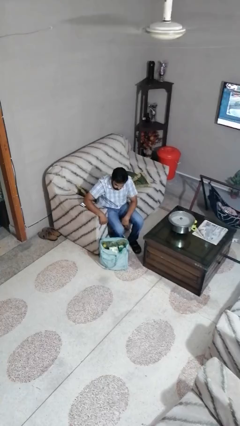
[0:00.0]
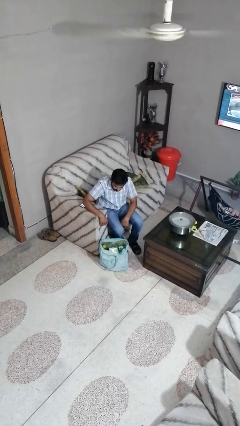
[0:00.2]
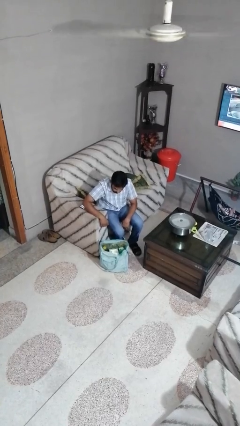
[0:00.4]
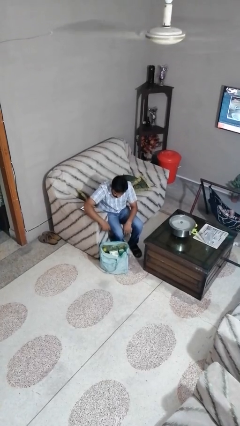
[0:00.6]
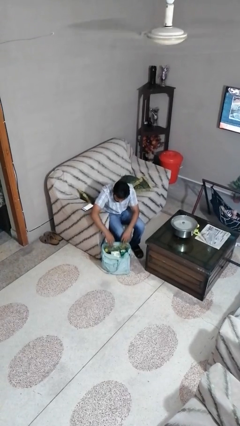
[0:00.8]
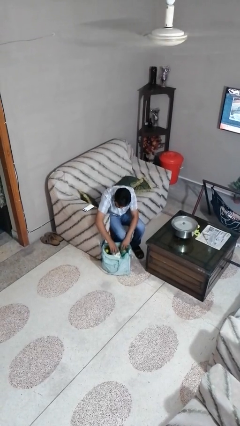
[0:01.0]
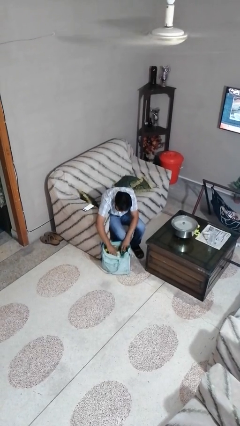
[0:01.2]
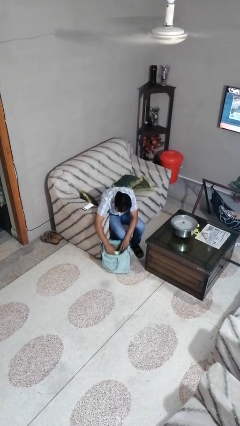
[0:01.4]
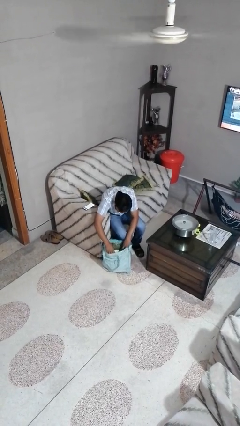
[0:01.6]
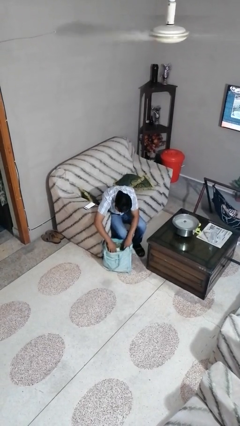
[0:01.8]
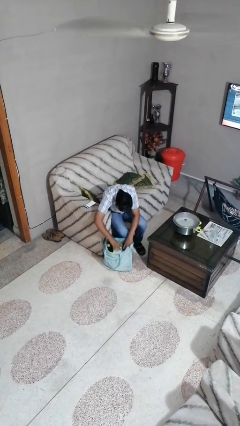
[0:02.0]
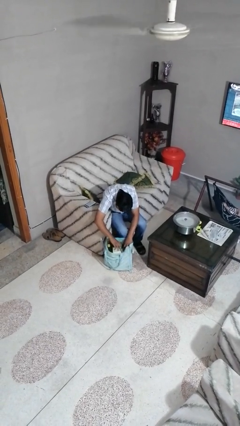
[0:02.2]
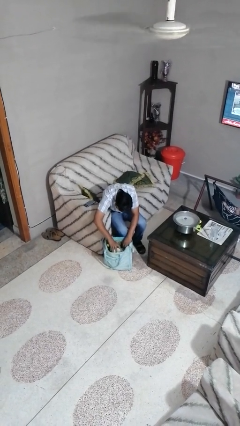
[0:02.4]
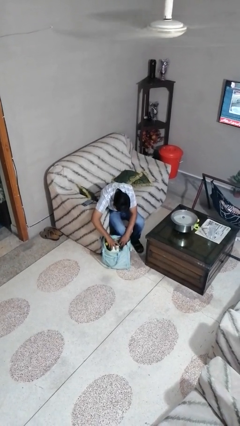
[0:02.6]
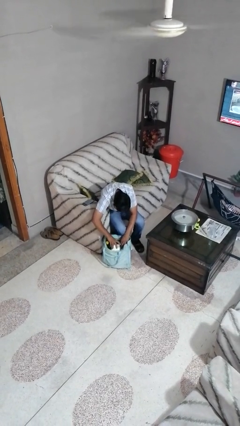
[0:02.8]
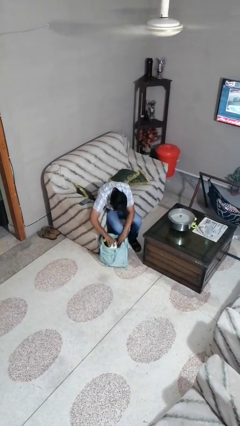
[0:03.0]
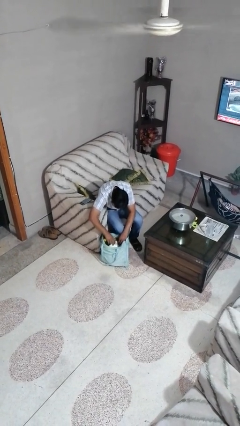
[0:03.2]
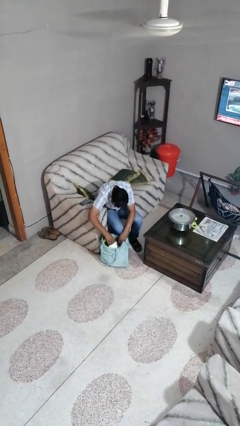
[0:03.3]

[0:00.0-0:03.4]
person searches in bag

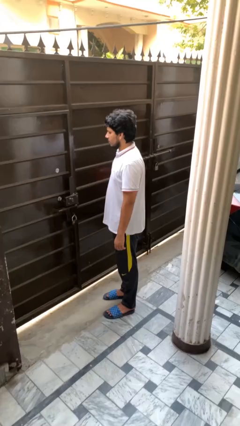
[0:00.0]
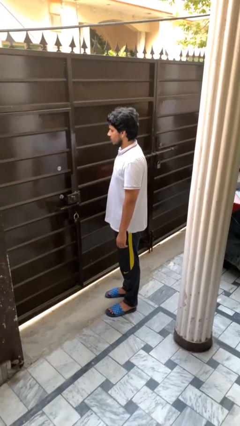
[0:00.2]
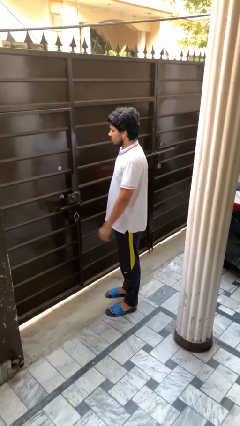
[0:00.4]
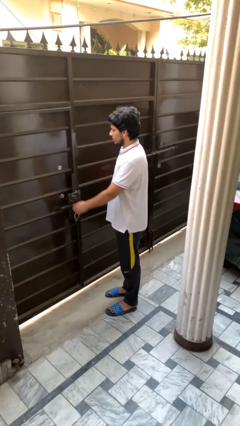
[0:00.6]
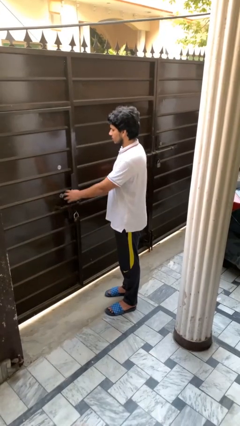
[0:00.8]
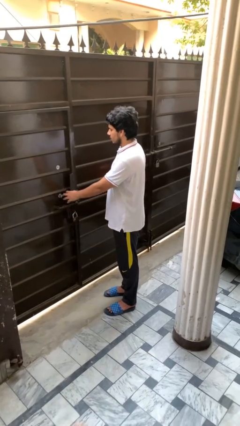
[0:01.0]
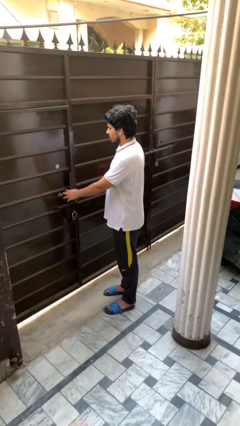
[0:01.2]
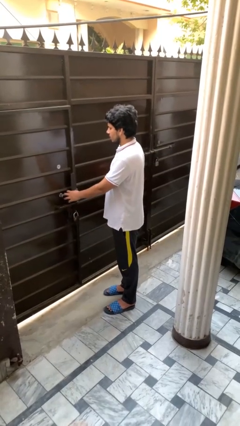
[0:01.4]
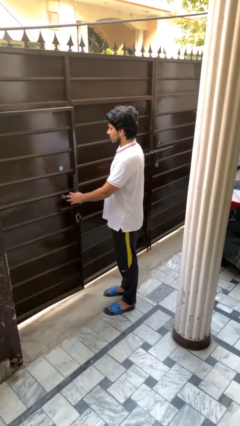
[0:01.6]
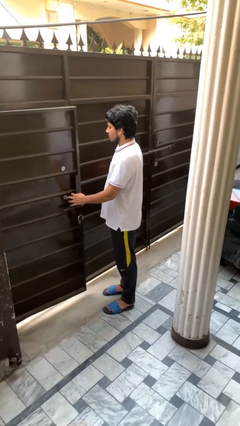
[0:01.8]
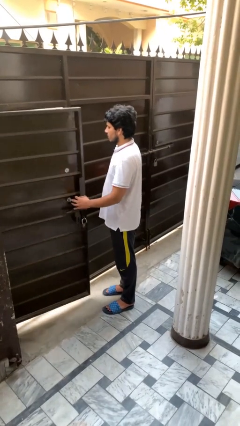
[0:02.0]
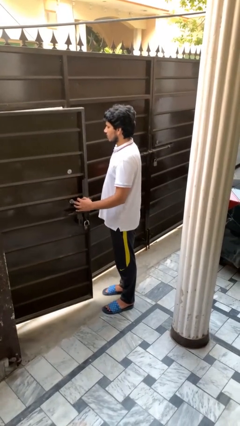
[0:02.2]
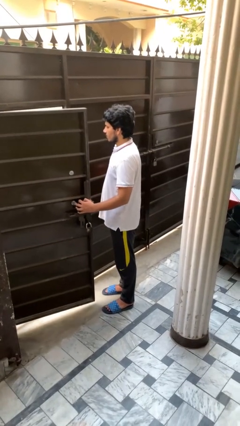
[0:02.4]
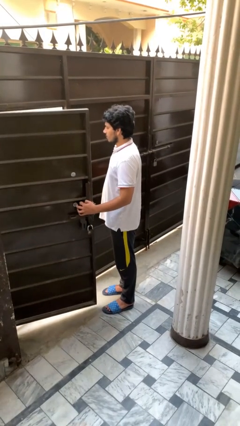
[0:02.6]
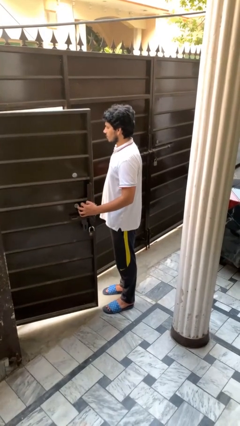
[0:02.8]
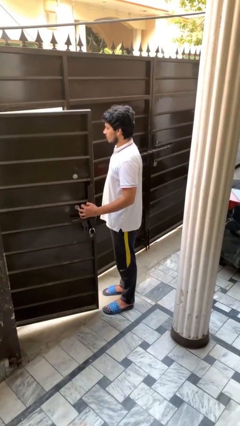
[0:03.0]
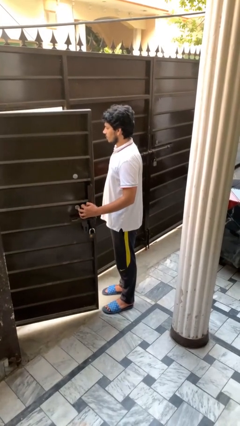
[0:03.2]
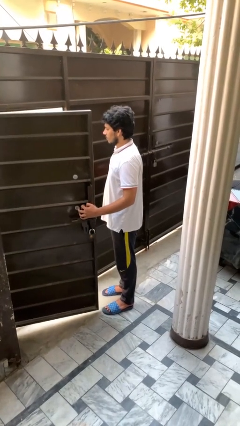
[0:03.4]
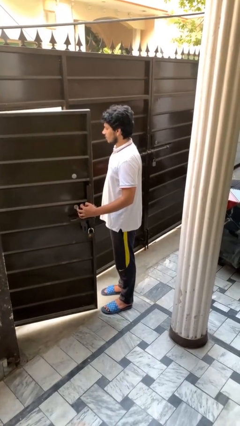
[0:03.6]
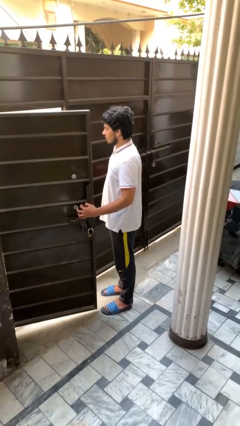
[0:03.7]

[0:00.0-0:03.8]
person opens gate

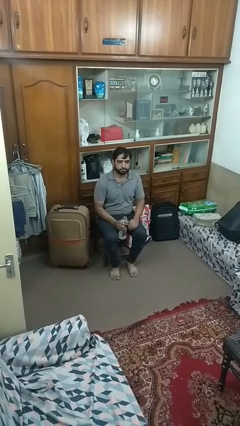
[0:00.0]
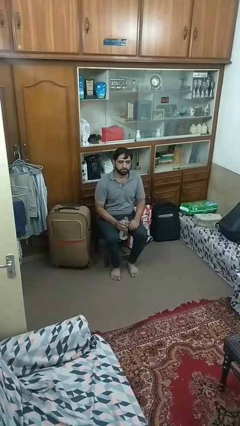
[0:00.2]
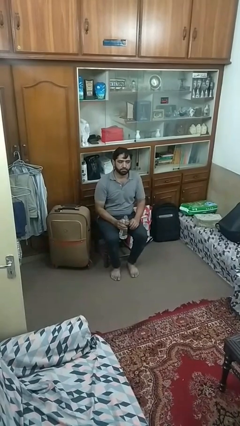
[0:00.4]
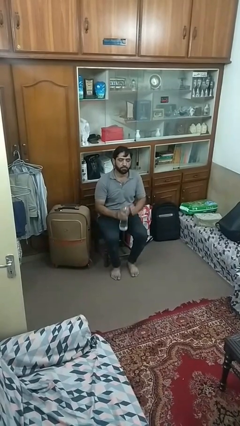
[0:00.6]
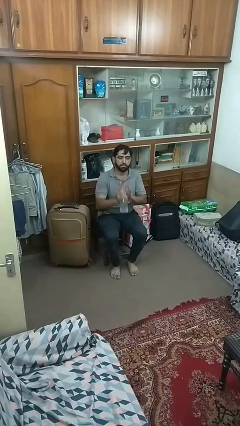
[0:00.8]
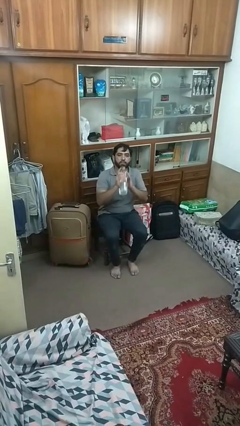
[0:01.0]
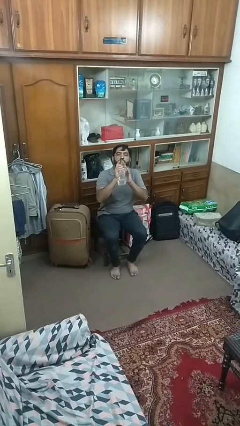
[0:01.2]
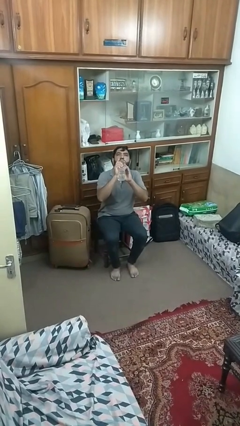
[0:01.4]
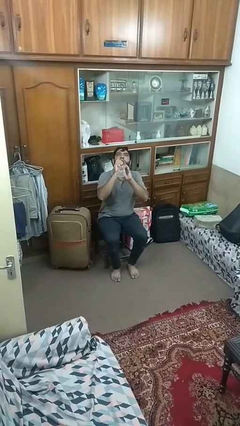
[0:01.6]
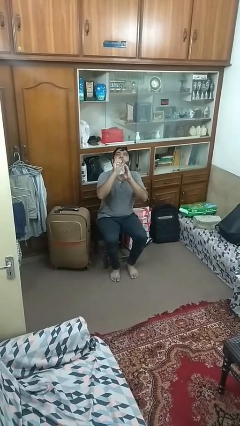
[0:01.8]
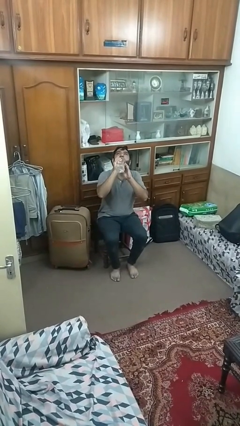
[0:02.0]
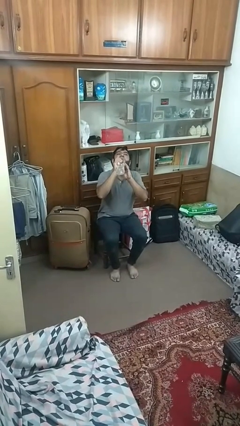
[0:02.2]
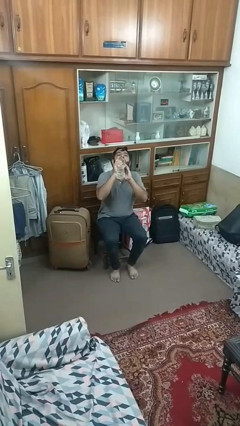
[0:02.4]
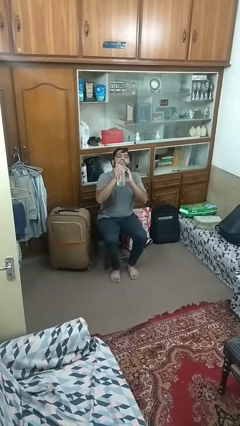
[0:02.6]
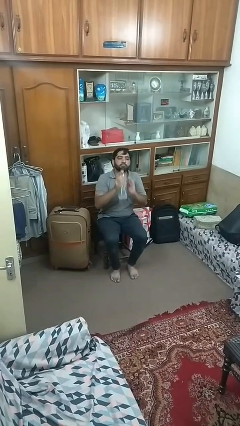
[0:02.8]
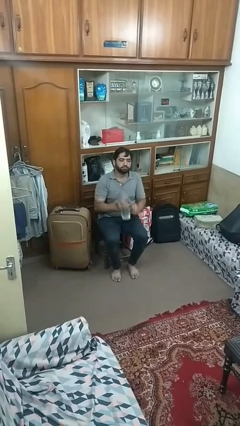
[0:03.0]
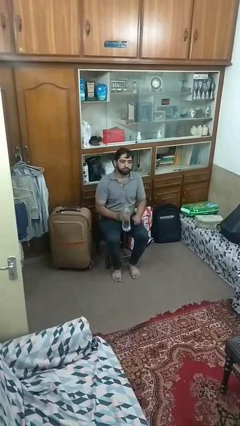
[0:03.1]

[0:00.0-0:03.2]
person drinks from bottle

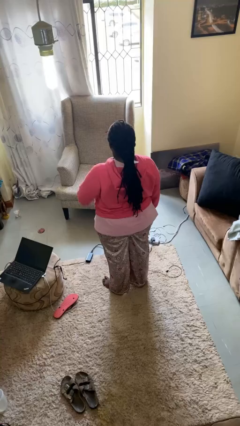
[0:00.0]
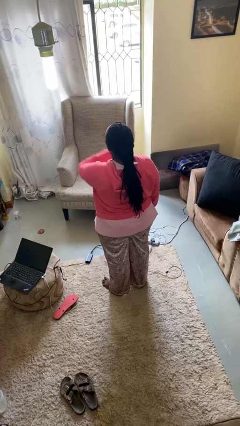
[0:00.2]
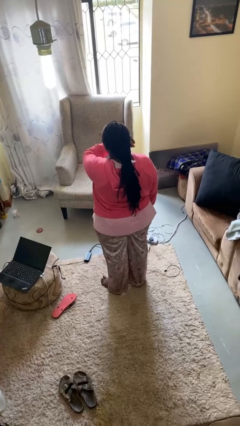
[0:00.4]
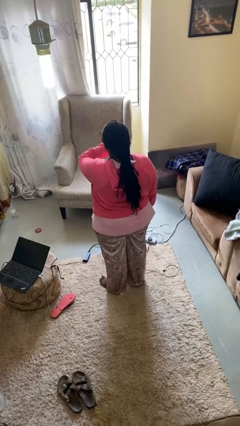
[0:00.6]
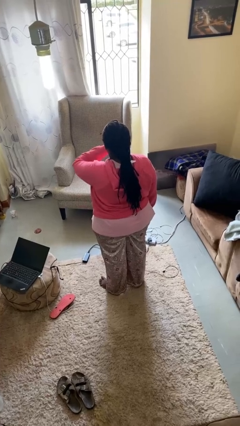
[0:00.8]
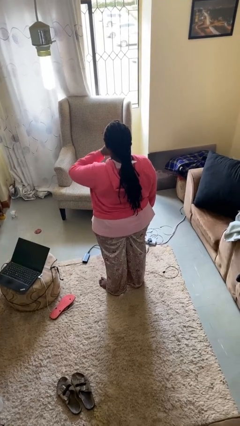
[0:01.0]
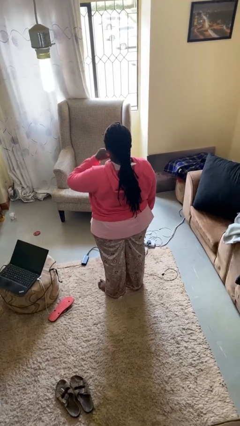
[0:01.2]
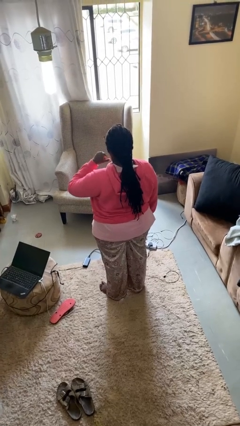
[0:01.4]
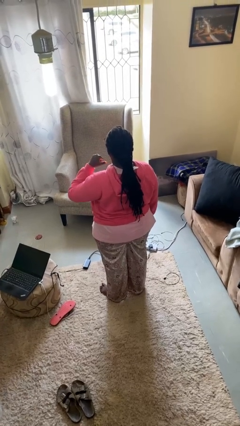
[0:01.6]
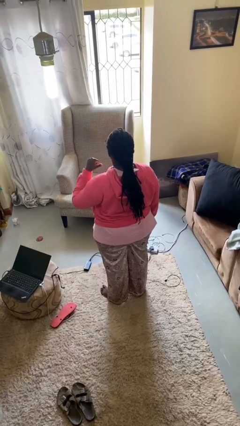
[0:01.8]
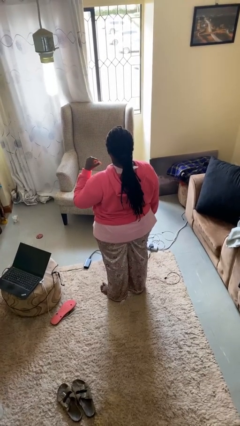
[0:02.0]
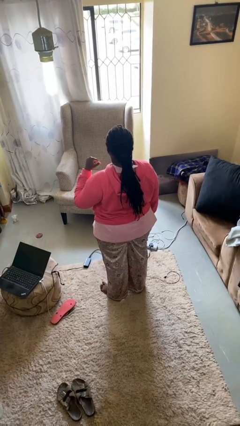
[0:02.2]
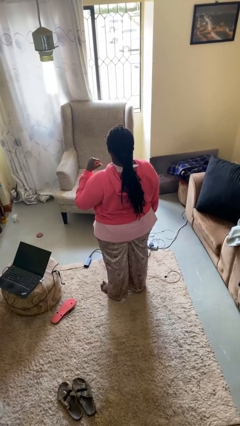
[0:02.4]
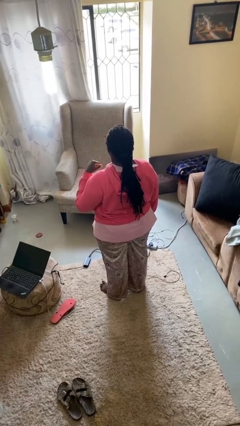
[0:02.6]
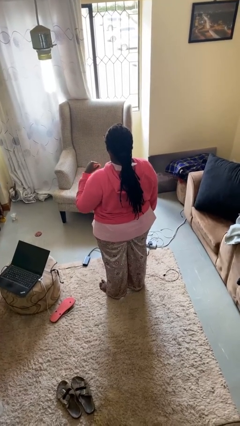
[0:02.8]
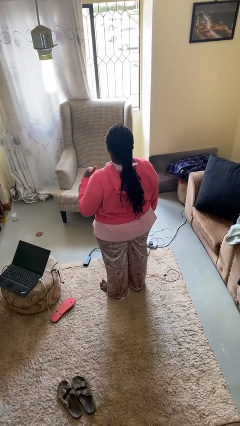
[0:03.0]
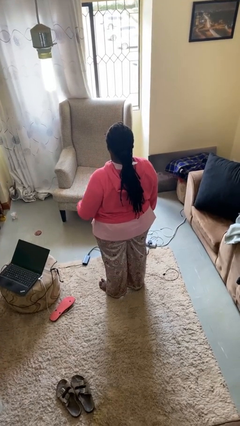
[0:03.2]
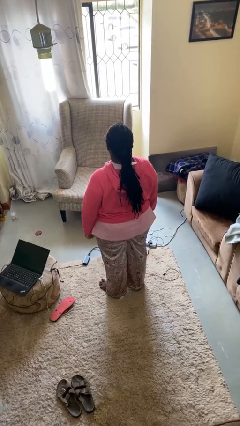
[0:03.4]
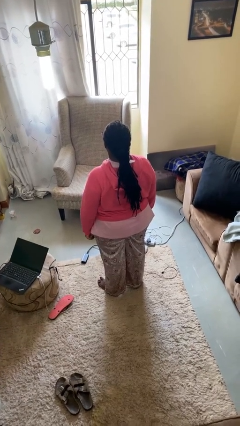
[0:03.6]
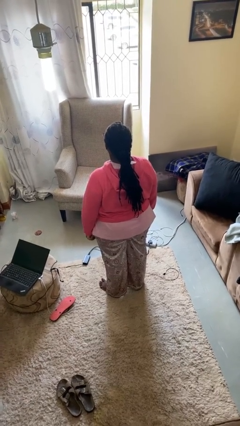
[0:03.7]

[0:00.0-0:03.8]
person gestures cut

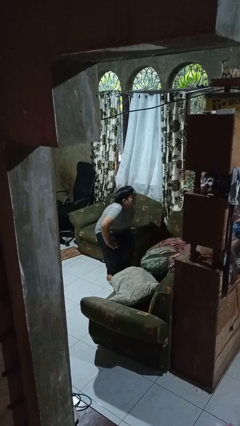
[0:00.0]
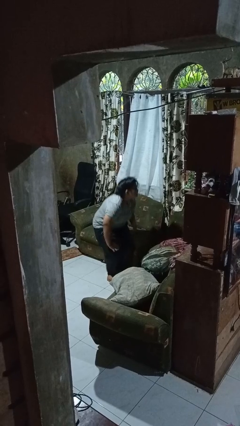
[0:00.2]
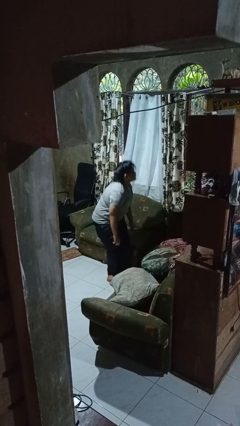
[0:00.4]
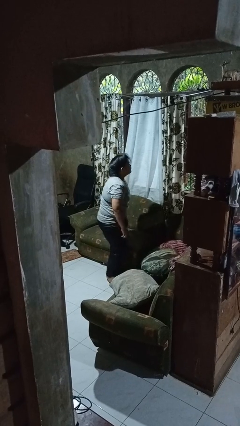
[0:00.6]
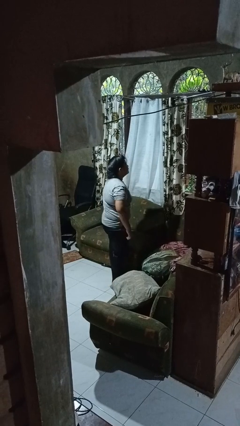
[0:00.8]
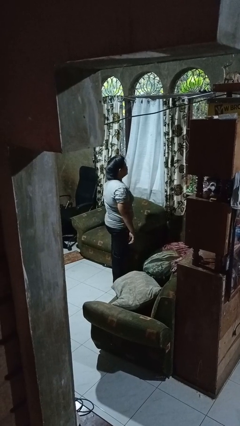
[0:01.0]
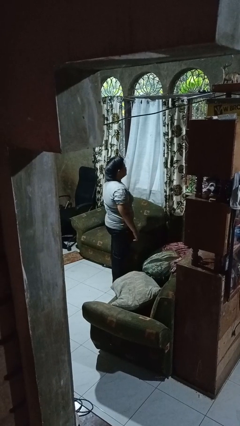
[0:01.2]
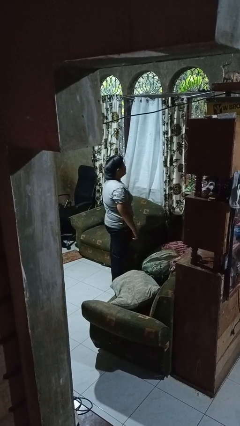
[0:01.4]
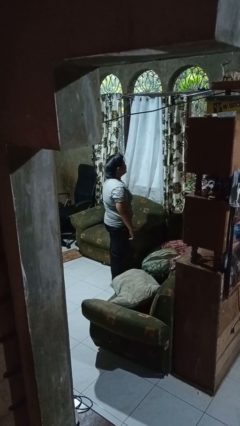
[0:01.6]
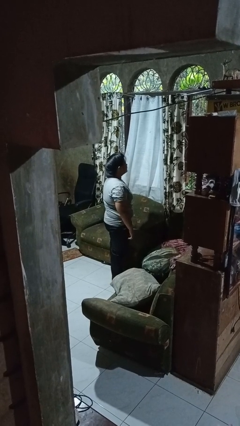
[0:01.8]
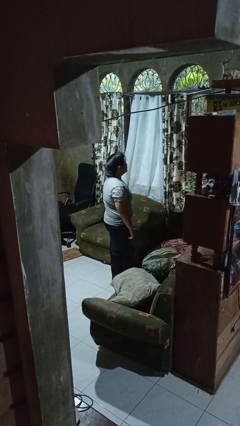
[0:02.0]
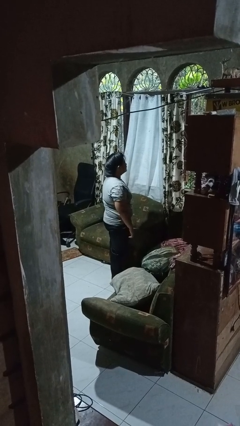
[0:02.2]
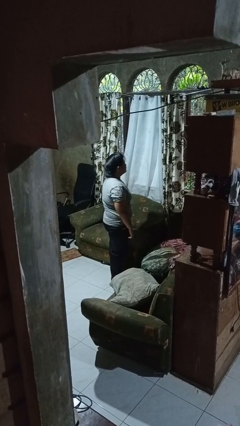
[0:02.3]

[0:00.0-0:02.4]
person stands up

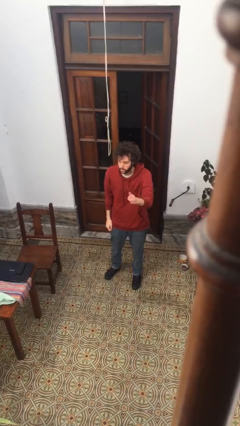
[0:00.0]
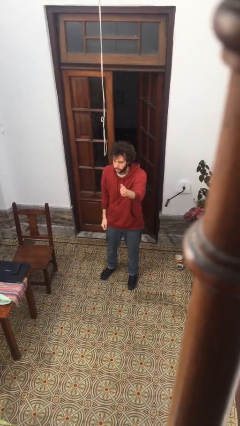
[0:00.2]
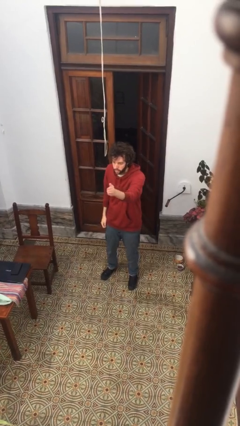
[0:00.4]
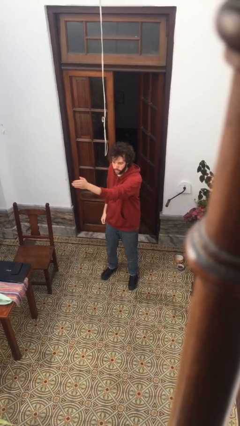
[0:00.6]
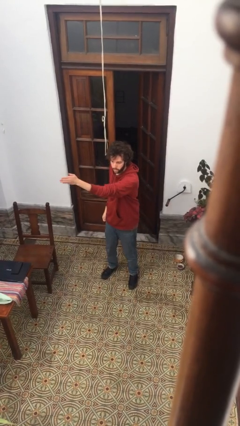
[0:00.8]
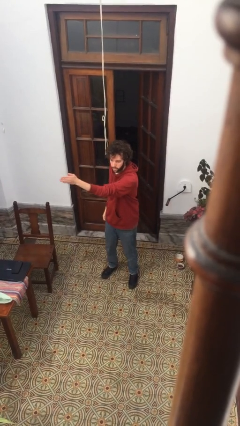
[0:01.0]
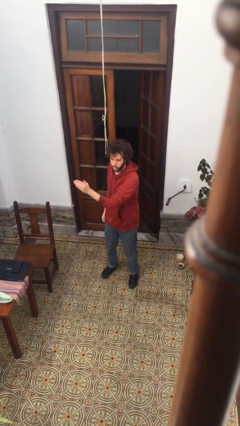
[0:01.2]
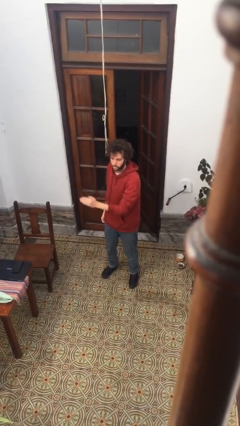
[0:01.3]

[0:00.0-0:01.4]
person gestures swipe right
